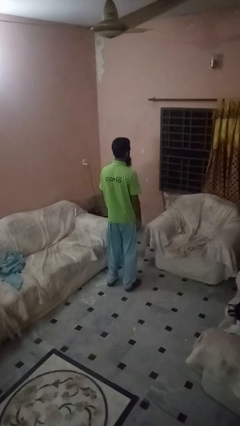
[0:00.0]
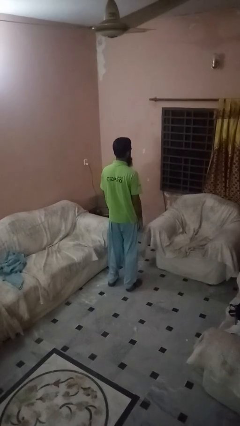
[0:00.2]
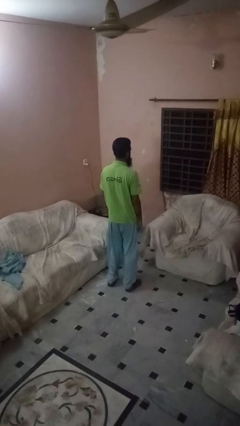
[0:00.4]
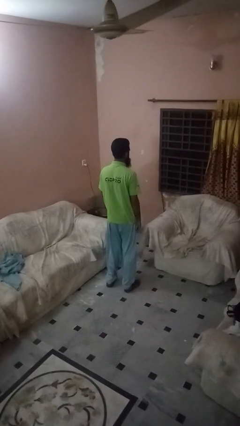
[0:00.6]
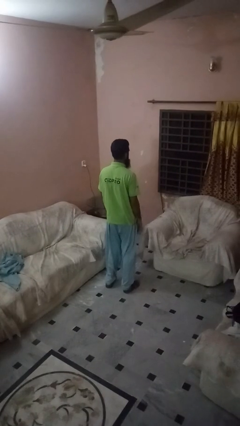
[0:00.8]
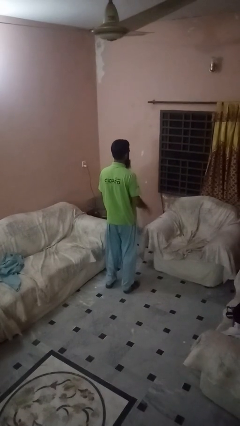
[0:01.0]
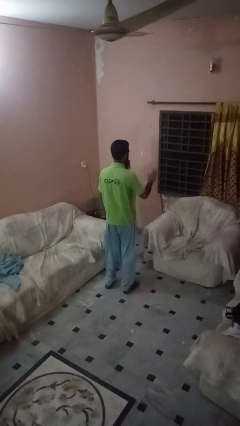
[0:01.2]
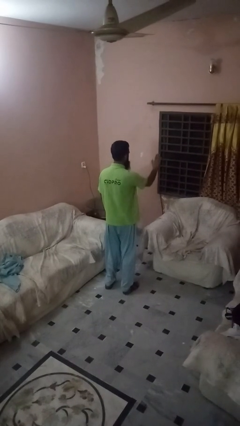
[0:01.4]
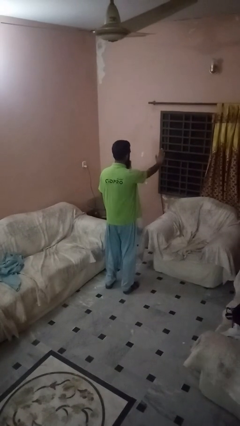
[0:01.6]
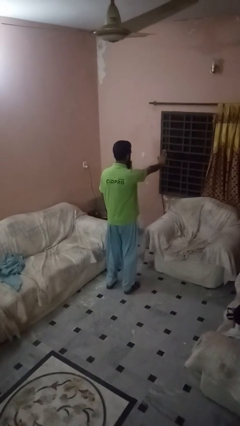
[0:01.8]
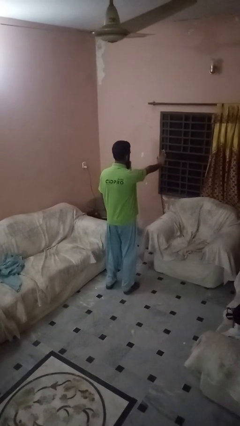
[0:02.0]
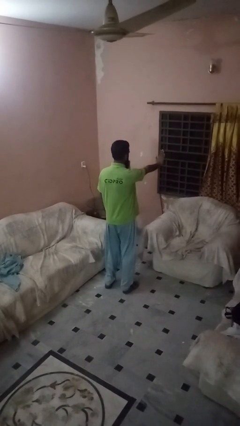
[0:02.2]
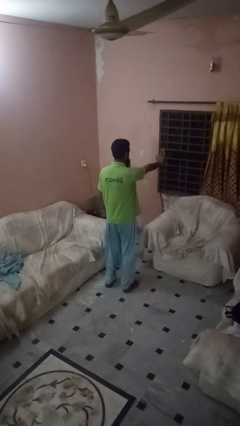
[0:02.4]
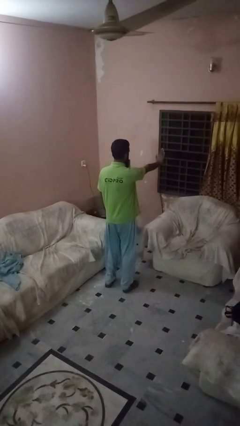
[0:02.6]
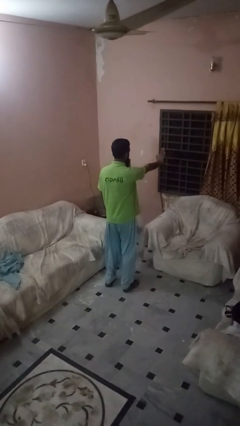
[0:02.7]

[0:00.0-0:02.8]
person gestures stop

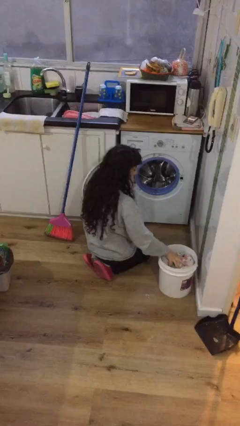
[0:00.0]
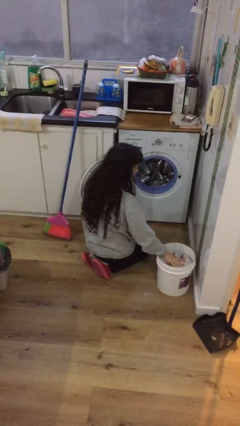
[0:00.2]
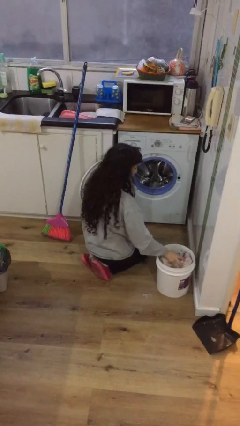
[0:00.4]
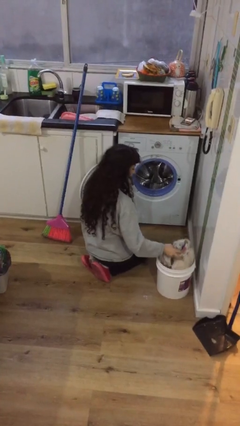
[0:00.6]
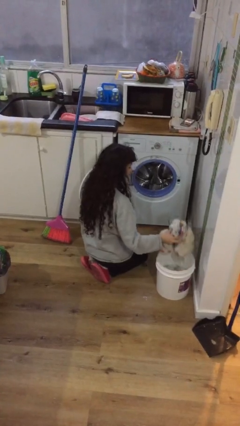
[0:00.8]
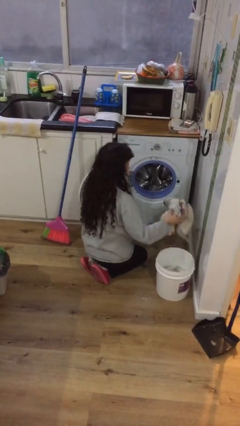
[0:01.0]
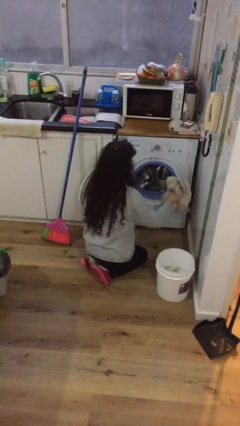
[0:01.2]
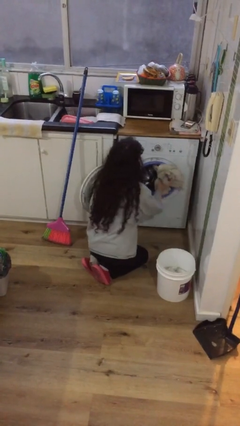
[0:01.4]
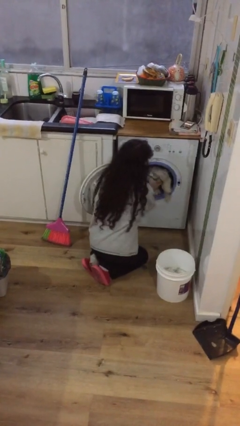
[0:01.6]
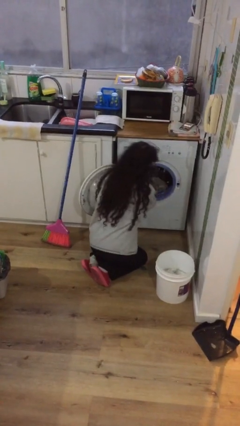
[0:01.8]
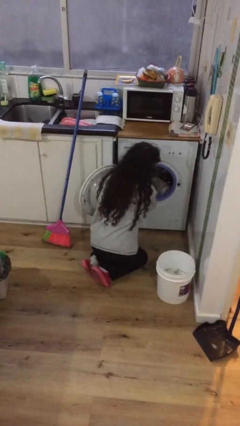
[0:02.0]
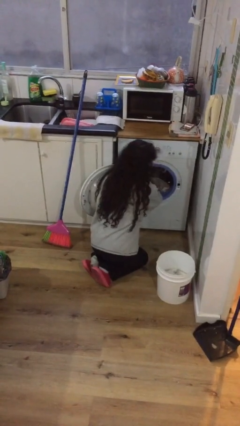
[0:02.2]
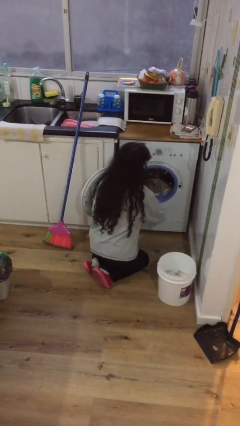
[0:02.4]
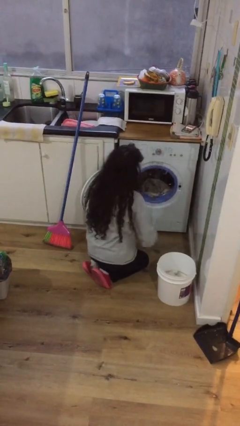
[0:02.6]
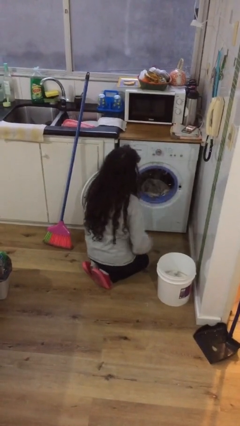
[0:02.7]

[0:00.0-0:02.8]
person loads dryer

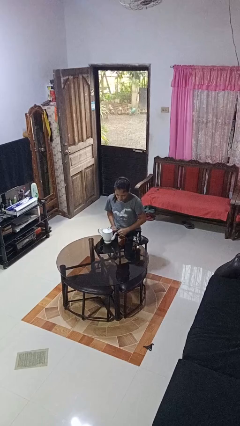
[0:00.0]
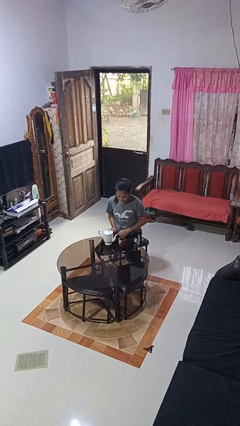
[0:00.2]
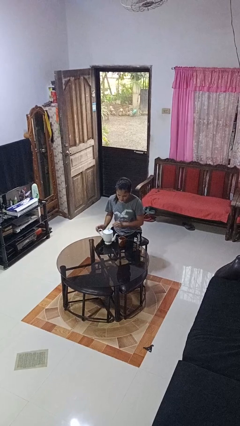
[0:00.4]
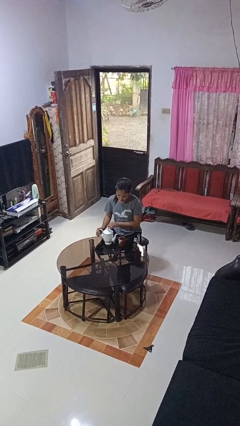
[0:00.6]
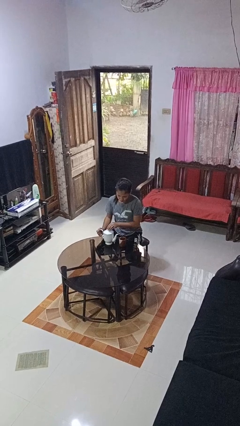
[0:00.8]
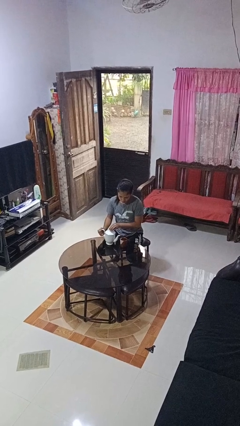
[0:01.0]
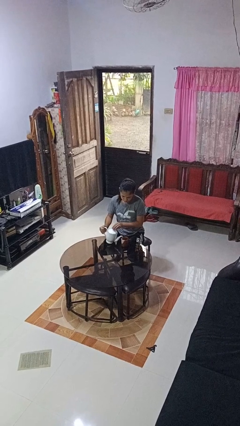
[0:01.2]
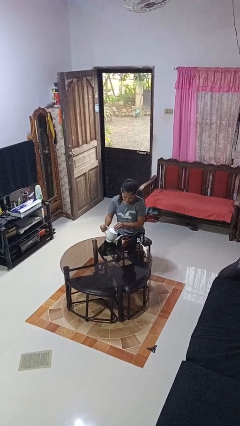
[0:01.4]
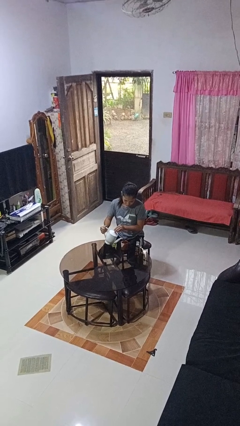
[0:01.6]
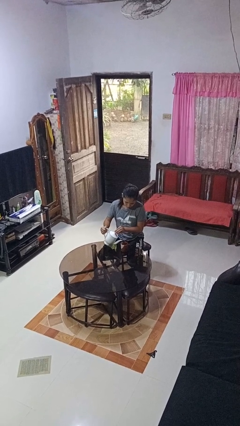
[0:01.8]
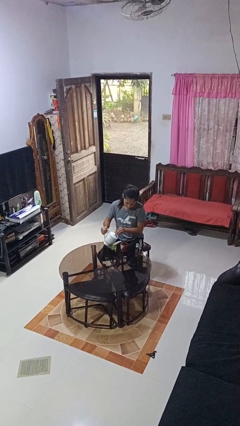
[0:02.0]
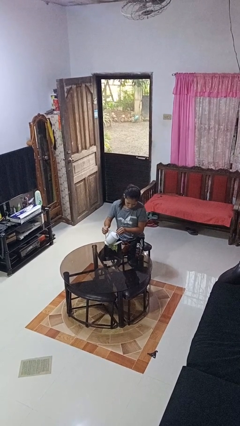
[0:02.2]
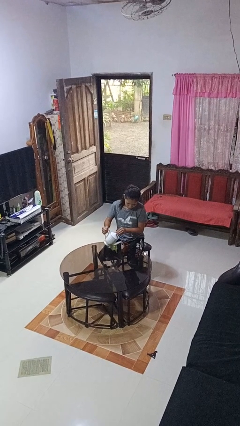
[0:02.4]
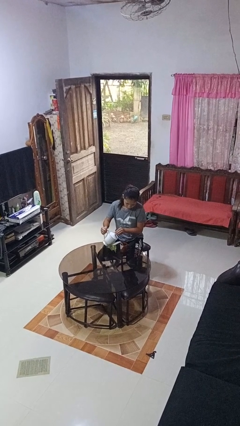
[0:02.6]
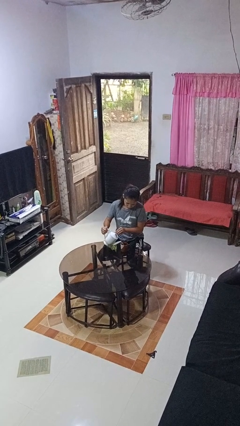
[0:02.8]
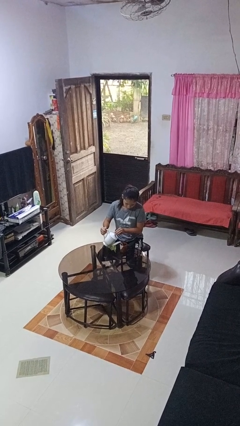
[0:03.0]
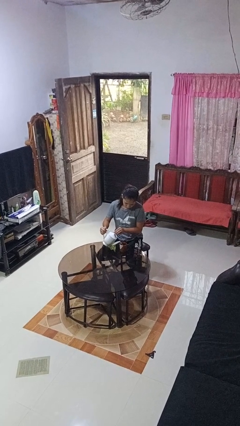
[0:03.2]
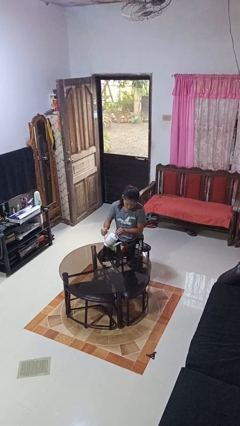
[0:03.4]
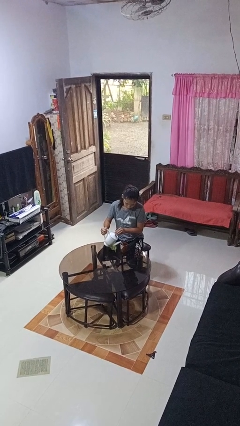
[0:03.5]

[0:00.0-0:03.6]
person pours coffee into mug

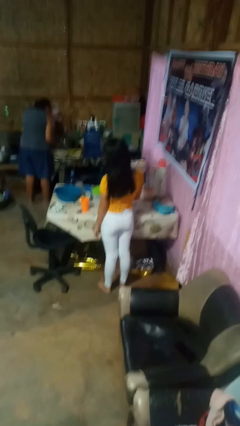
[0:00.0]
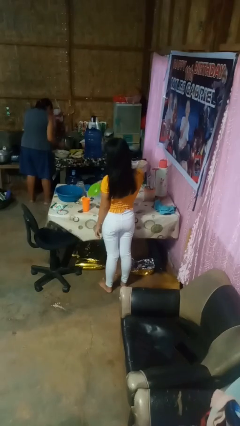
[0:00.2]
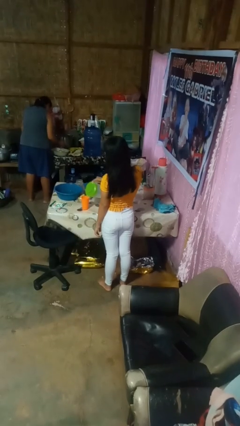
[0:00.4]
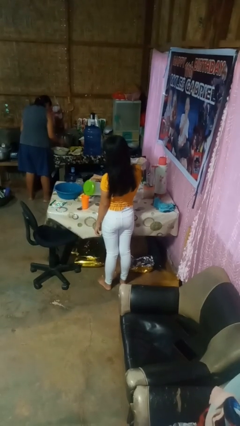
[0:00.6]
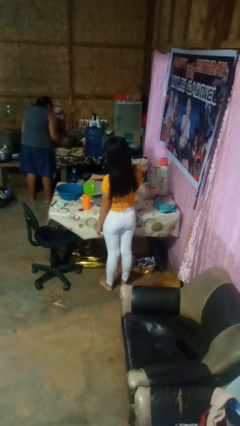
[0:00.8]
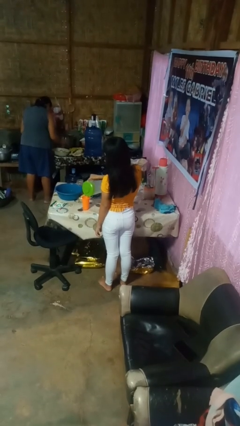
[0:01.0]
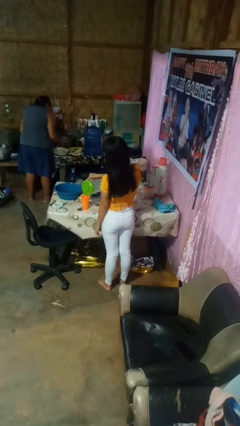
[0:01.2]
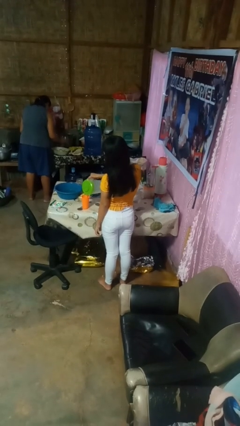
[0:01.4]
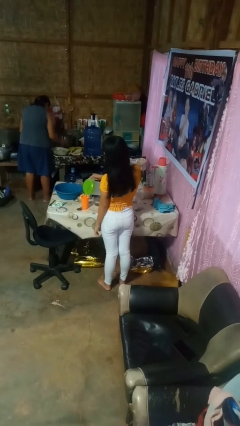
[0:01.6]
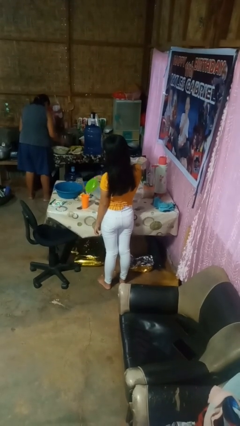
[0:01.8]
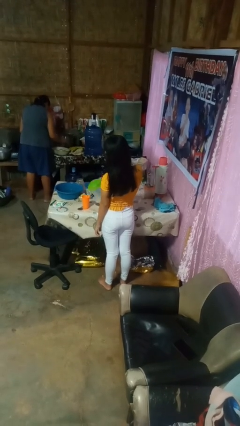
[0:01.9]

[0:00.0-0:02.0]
person pours liquid into cup

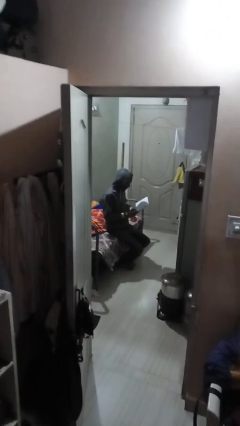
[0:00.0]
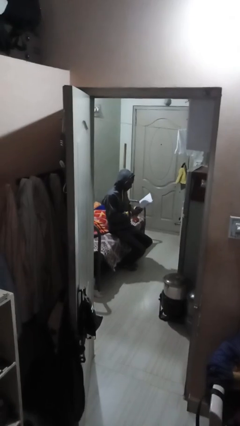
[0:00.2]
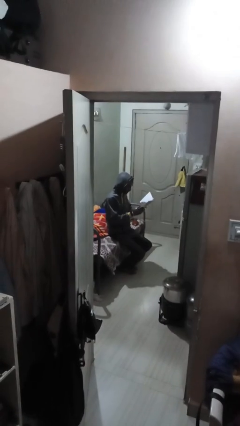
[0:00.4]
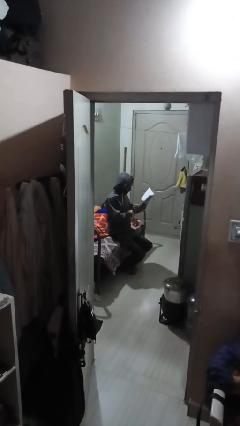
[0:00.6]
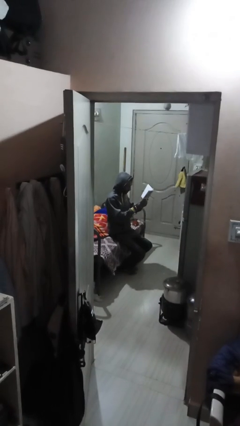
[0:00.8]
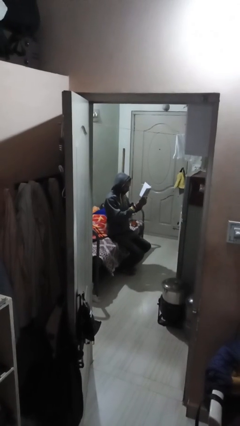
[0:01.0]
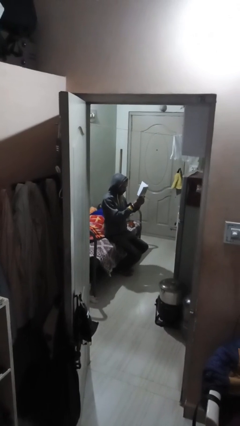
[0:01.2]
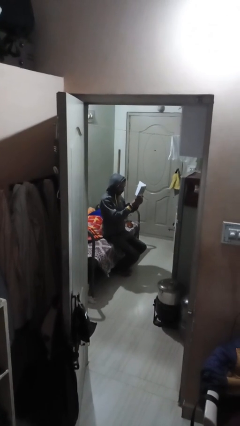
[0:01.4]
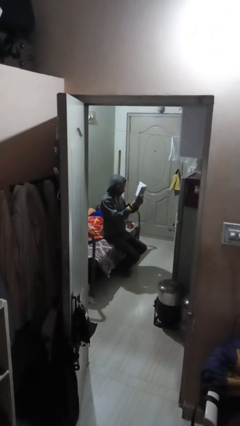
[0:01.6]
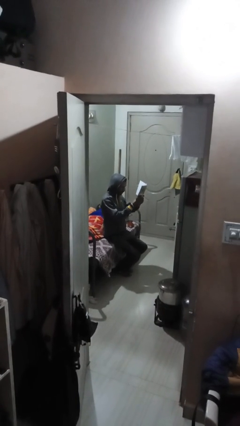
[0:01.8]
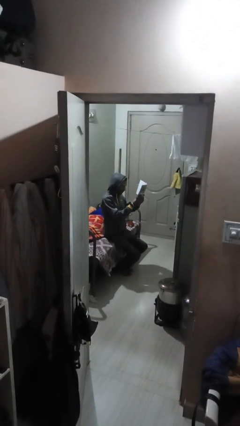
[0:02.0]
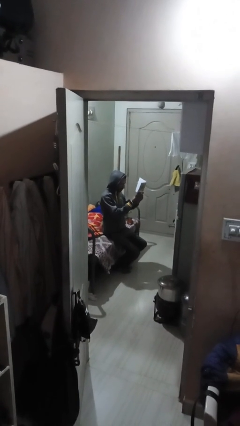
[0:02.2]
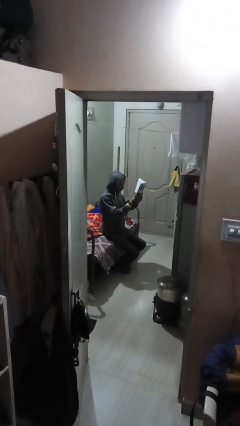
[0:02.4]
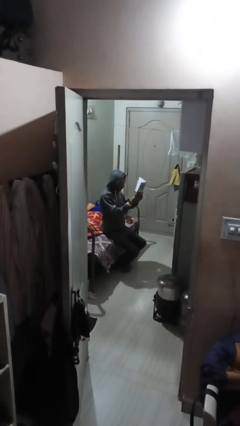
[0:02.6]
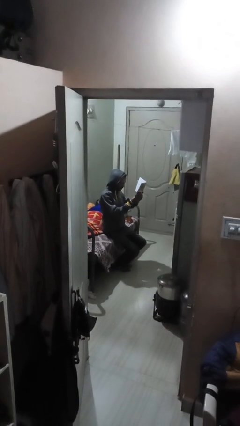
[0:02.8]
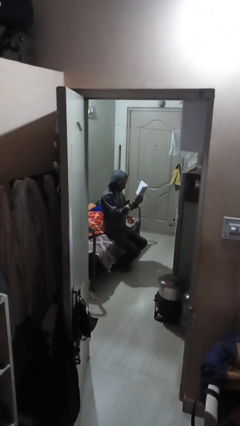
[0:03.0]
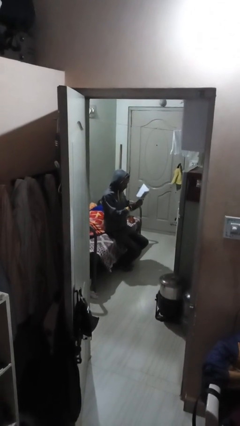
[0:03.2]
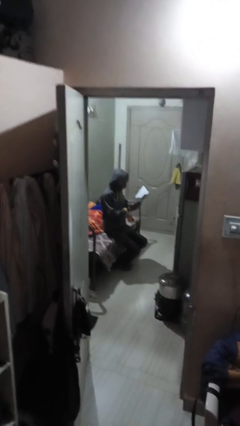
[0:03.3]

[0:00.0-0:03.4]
person reads document

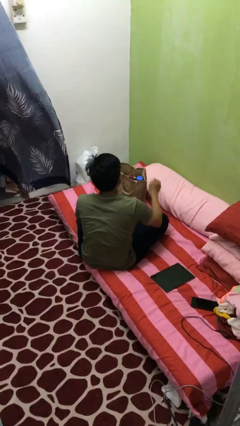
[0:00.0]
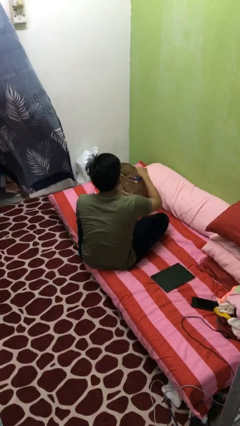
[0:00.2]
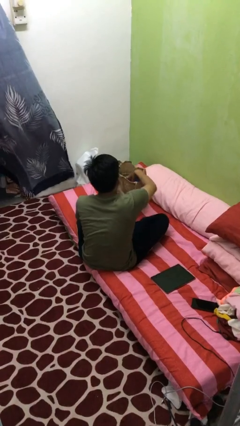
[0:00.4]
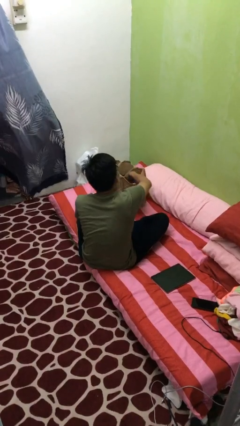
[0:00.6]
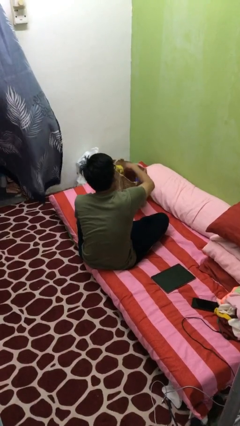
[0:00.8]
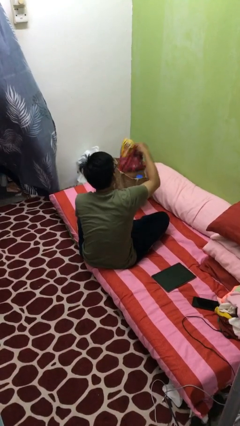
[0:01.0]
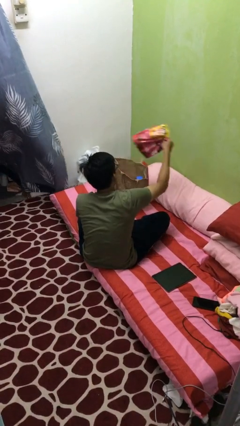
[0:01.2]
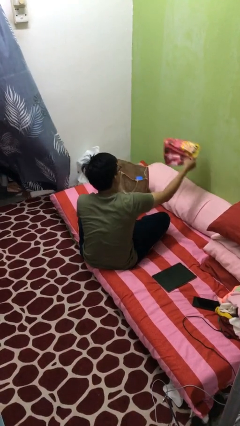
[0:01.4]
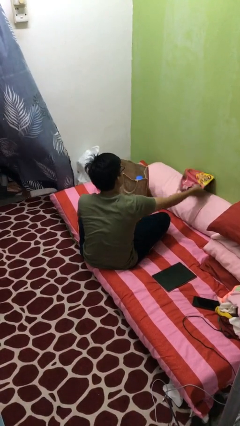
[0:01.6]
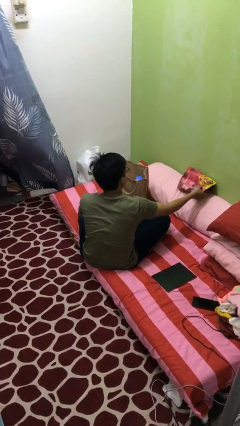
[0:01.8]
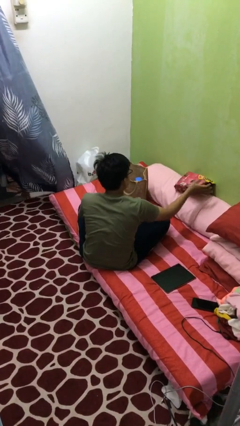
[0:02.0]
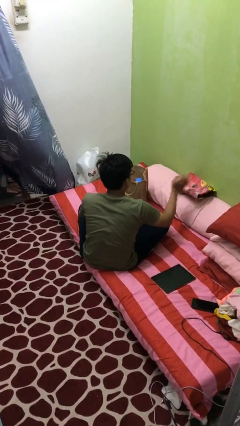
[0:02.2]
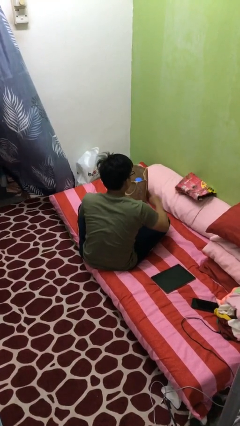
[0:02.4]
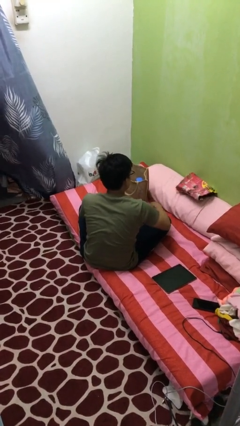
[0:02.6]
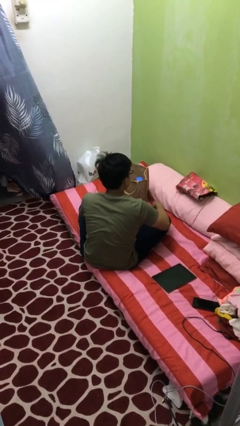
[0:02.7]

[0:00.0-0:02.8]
person takes object from bag

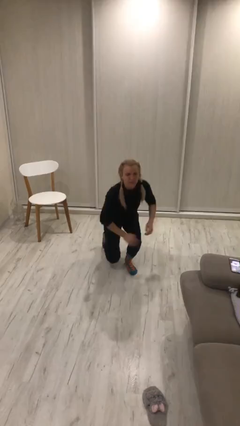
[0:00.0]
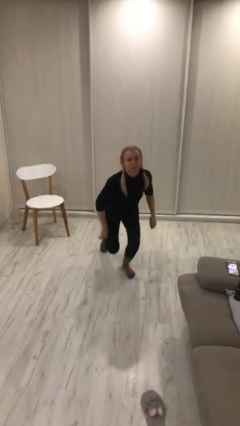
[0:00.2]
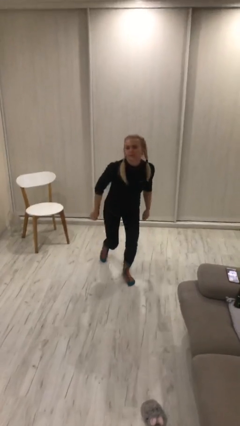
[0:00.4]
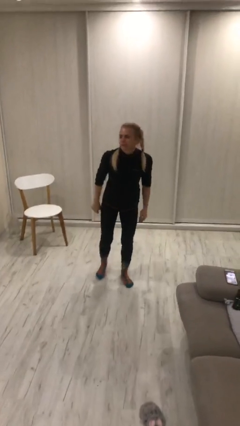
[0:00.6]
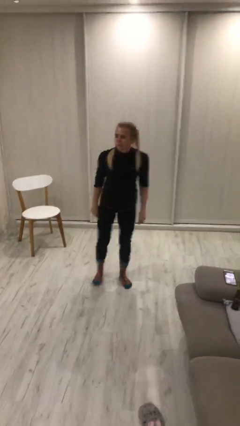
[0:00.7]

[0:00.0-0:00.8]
person stands up
